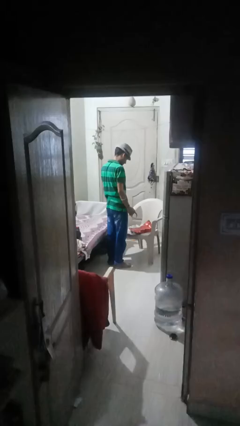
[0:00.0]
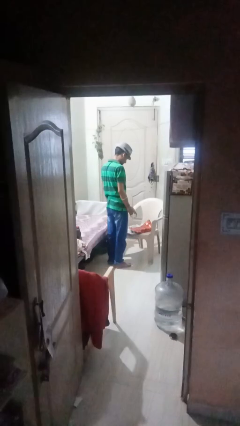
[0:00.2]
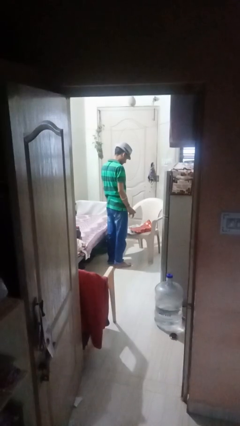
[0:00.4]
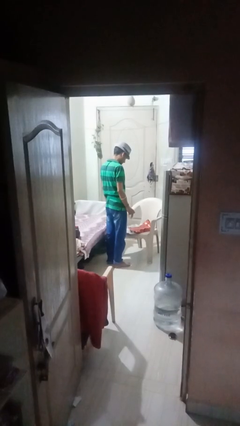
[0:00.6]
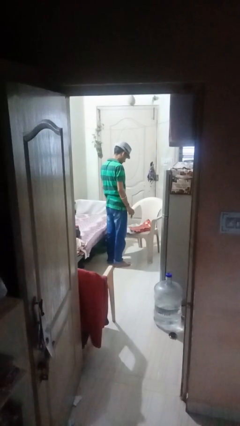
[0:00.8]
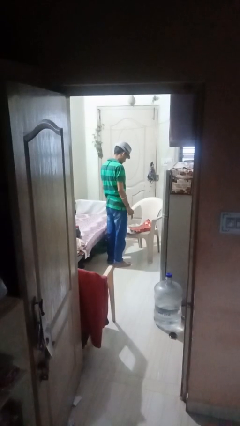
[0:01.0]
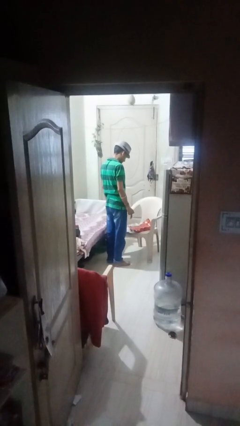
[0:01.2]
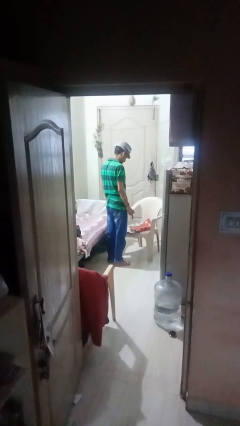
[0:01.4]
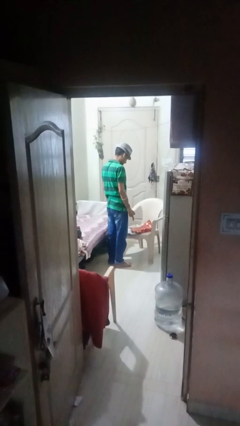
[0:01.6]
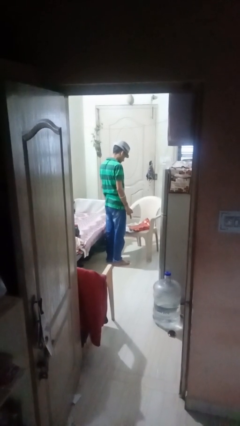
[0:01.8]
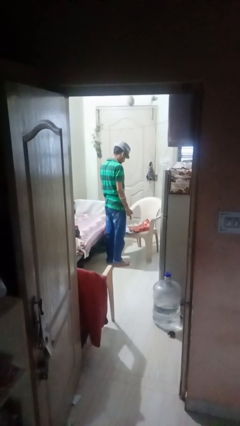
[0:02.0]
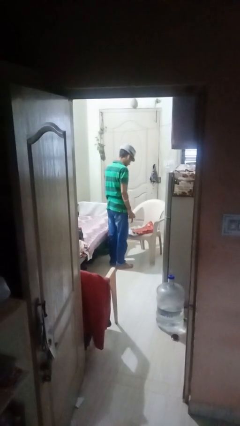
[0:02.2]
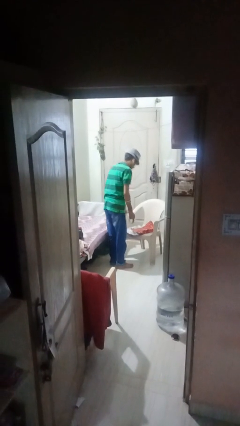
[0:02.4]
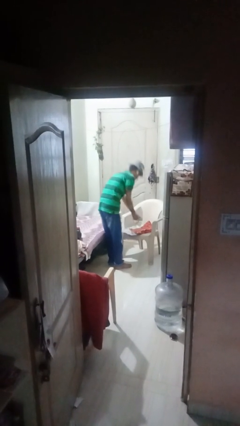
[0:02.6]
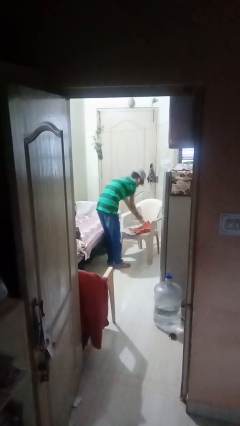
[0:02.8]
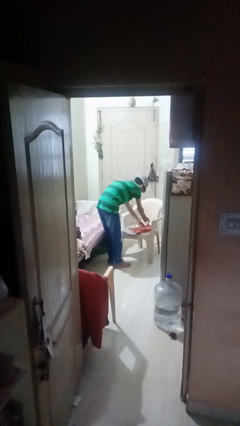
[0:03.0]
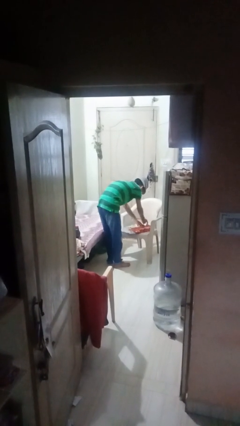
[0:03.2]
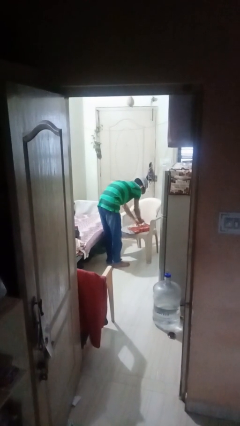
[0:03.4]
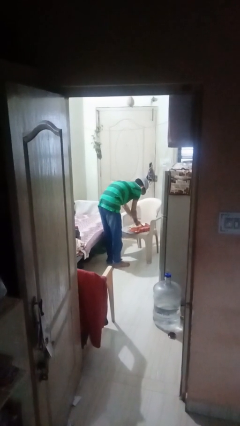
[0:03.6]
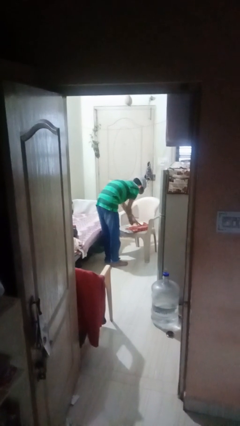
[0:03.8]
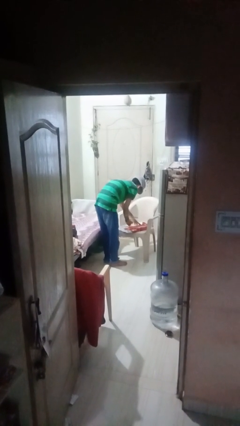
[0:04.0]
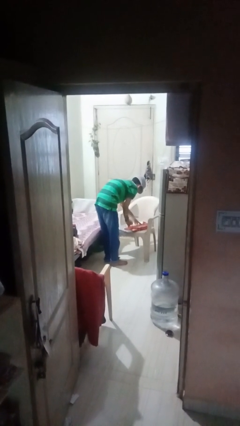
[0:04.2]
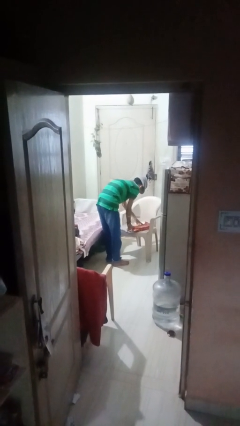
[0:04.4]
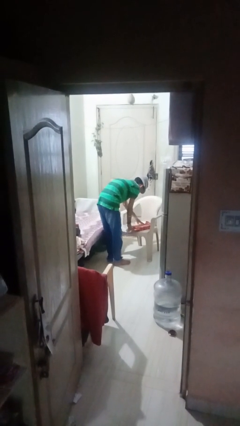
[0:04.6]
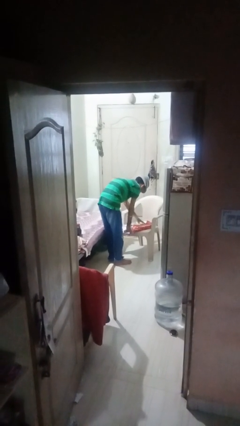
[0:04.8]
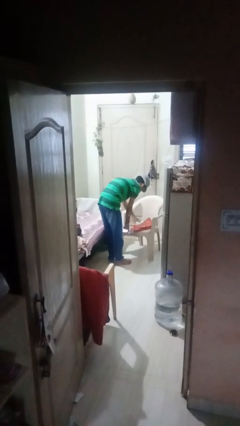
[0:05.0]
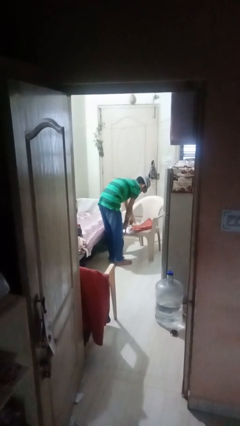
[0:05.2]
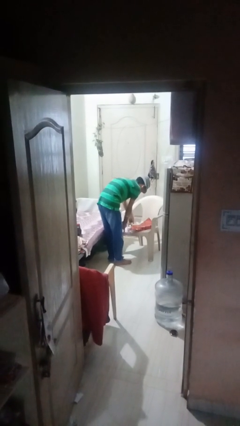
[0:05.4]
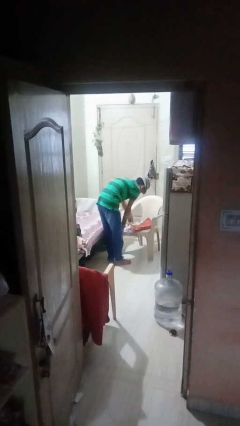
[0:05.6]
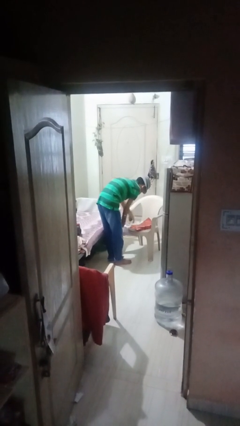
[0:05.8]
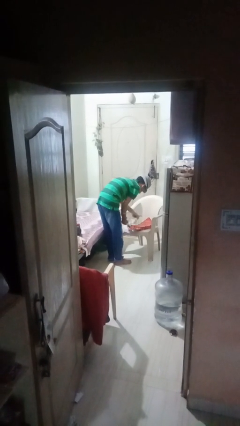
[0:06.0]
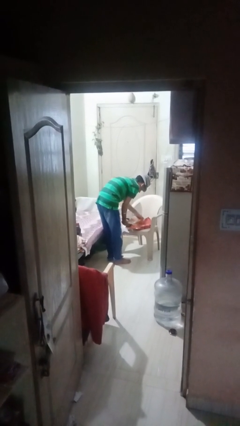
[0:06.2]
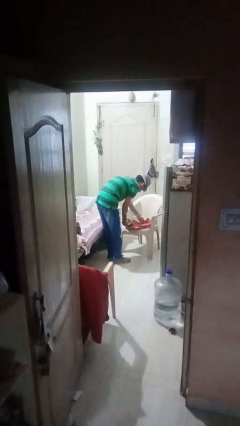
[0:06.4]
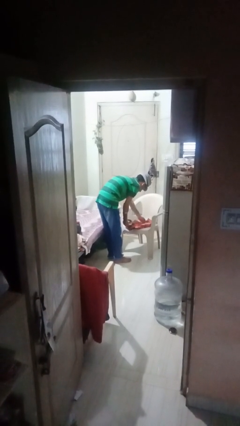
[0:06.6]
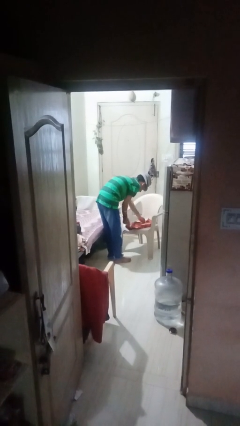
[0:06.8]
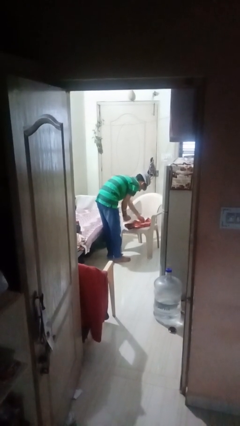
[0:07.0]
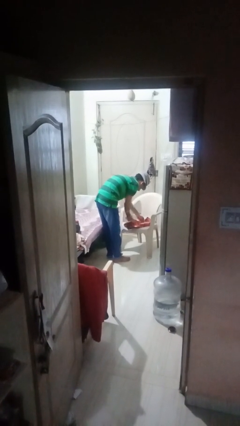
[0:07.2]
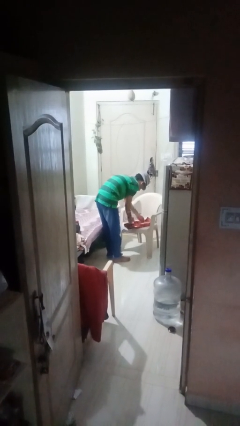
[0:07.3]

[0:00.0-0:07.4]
person wraps box

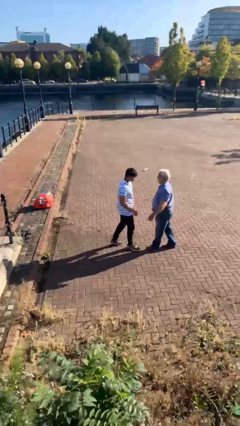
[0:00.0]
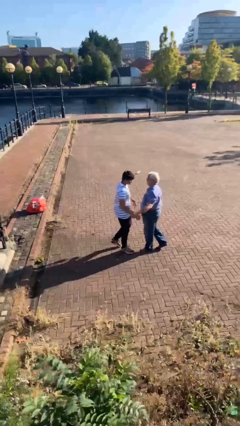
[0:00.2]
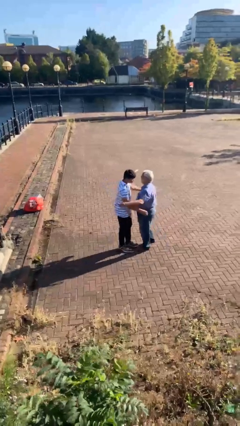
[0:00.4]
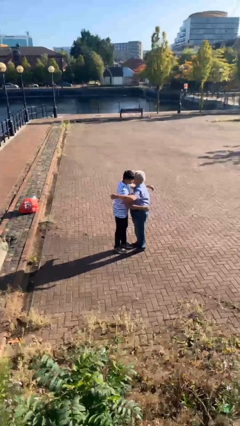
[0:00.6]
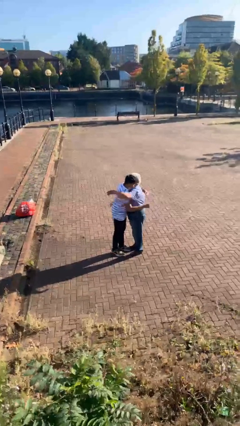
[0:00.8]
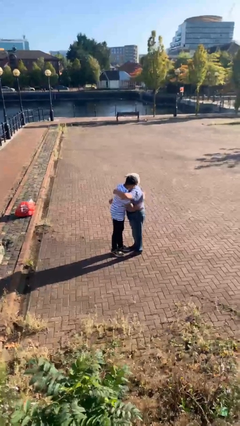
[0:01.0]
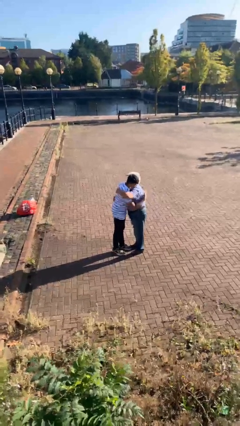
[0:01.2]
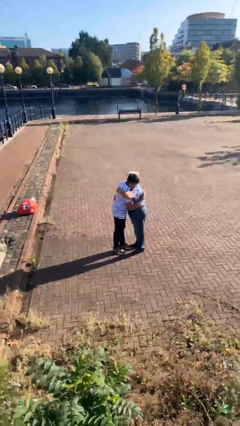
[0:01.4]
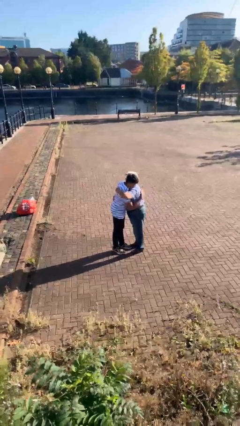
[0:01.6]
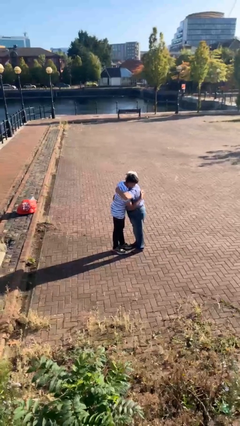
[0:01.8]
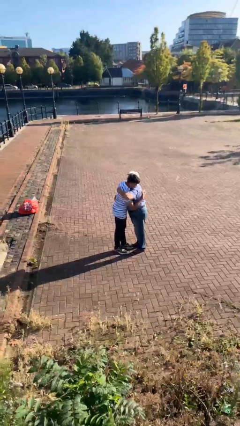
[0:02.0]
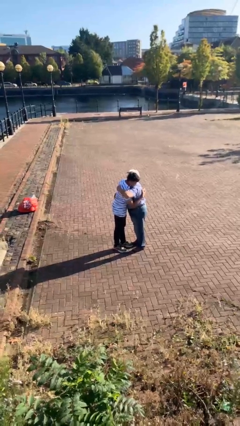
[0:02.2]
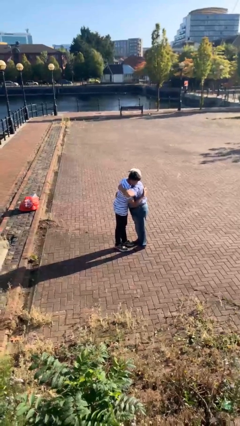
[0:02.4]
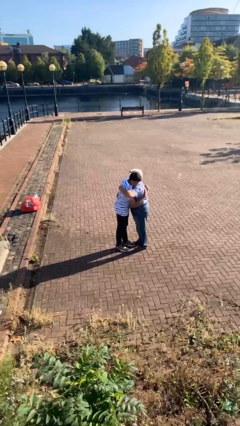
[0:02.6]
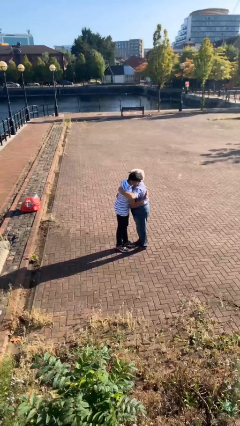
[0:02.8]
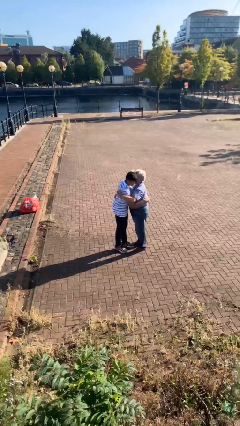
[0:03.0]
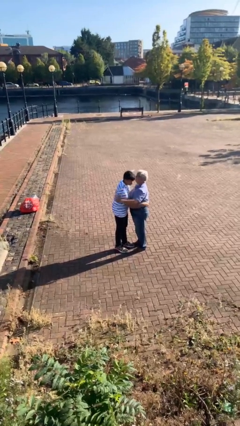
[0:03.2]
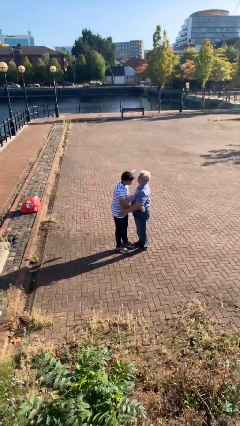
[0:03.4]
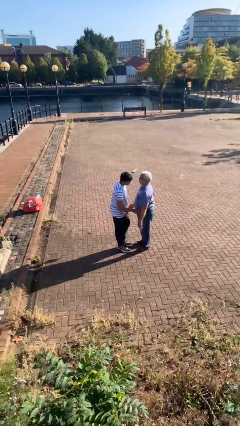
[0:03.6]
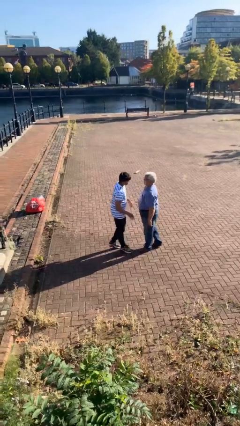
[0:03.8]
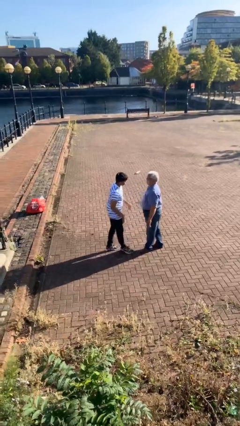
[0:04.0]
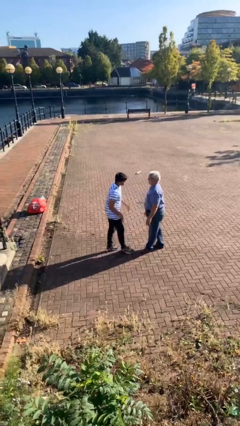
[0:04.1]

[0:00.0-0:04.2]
person embraces person

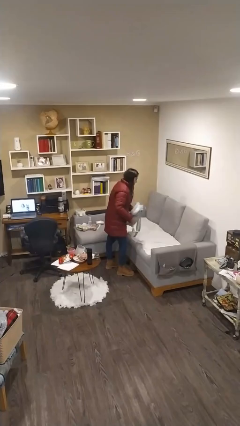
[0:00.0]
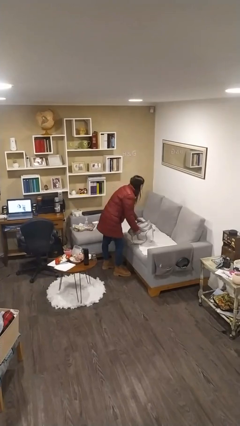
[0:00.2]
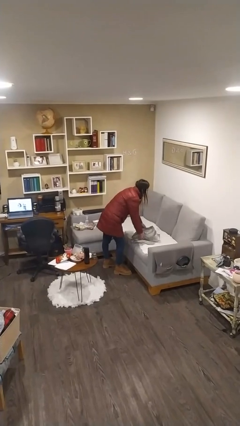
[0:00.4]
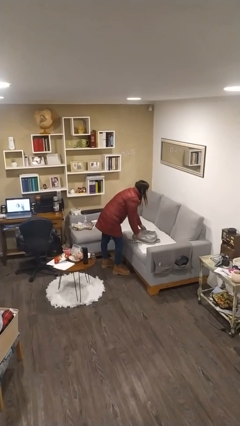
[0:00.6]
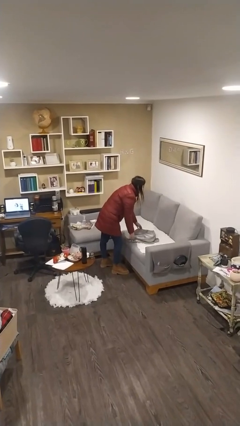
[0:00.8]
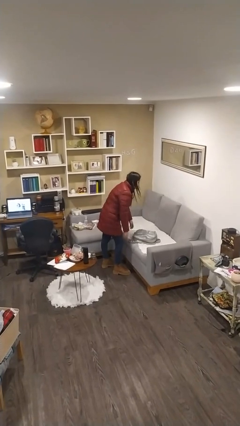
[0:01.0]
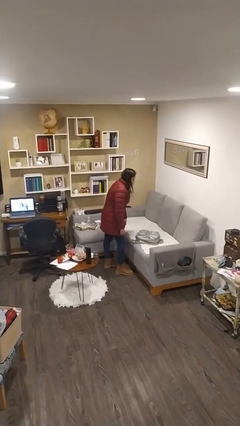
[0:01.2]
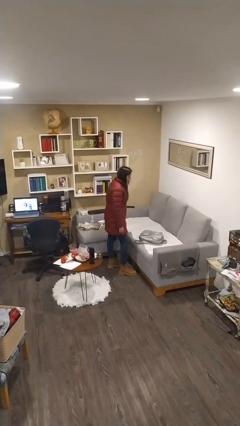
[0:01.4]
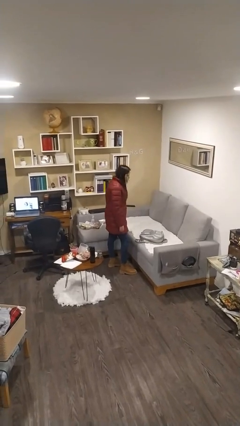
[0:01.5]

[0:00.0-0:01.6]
person puts down object on couch

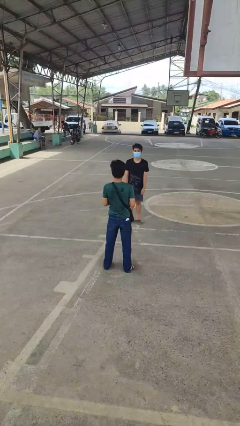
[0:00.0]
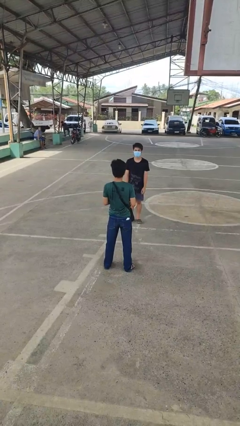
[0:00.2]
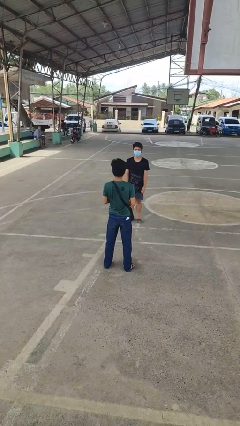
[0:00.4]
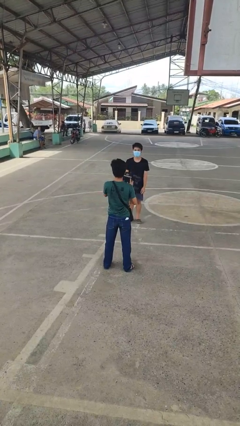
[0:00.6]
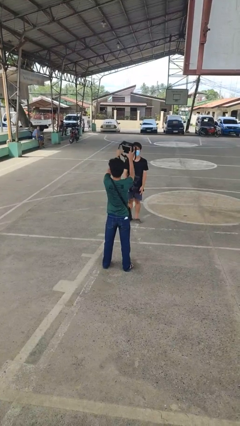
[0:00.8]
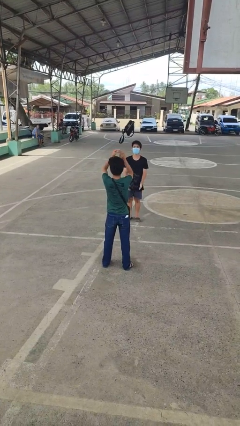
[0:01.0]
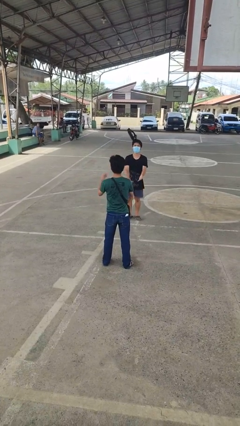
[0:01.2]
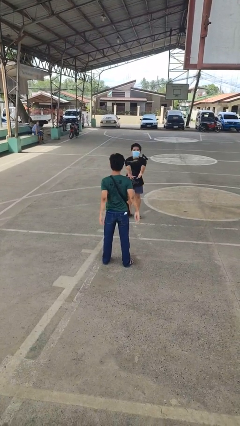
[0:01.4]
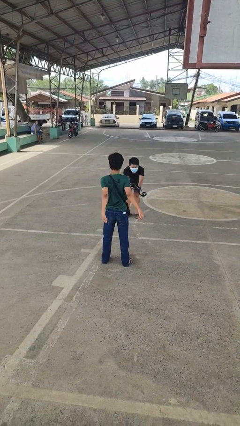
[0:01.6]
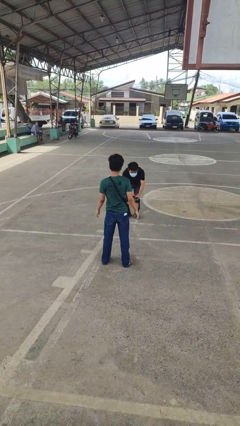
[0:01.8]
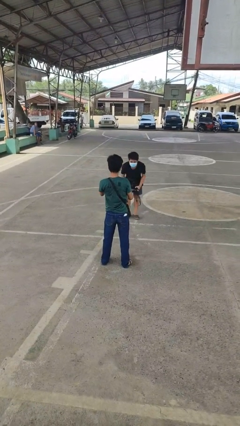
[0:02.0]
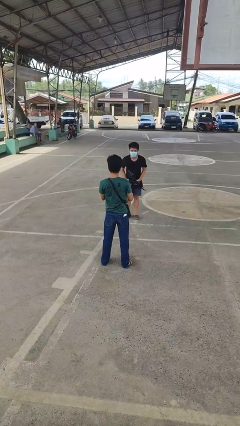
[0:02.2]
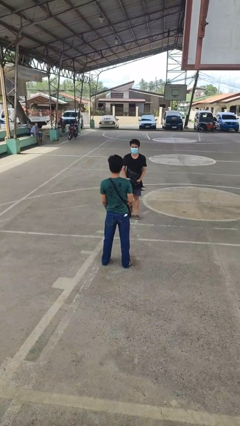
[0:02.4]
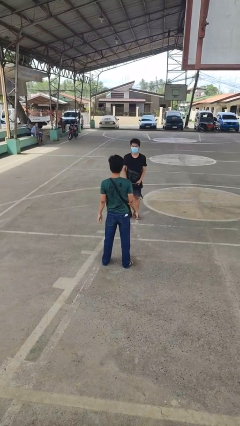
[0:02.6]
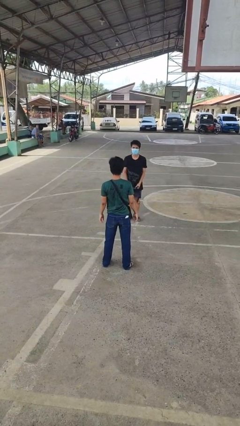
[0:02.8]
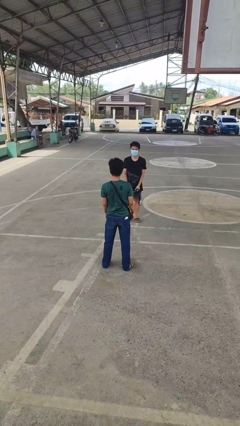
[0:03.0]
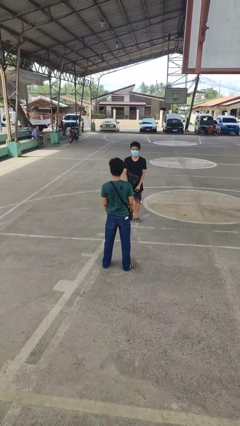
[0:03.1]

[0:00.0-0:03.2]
person throws object to person

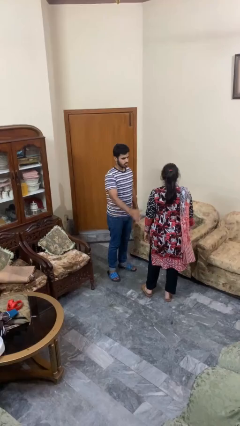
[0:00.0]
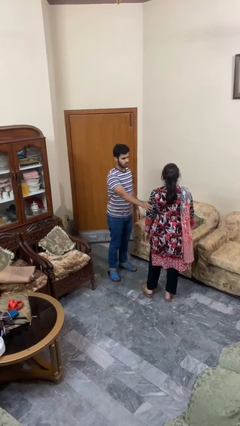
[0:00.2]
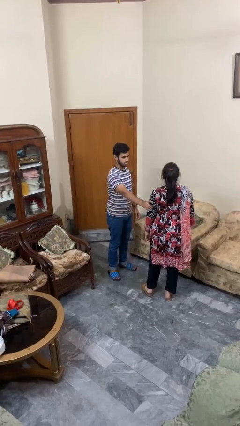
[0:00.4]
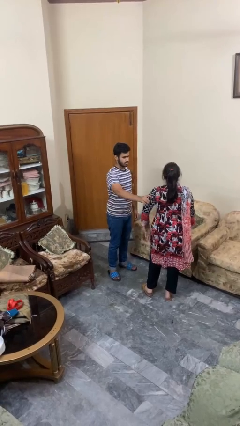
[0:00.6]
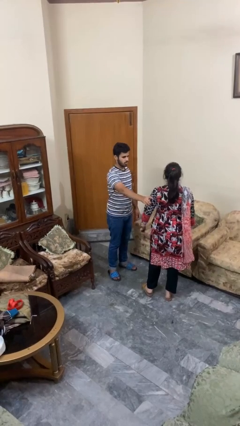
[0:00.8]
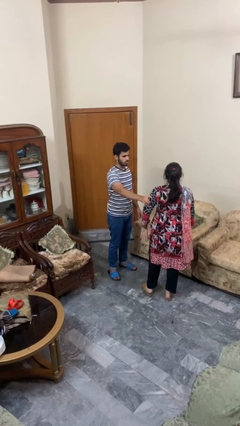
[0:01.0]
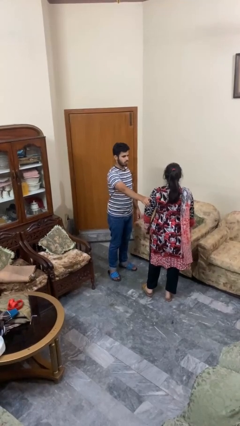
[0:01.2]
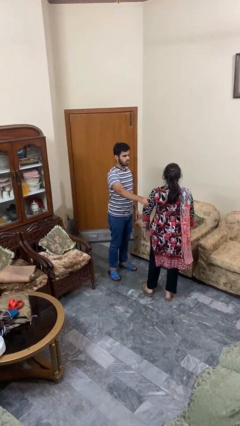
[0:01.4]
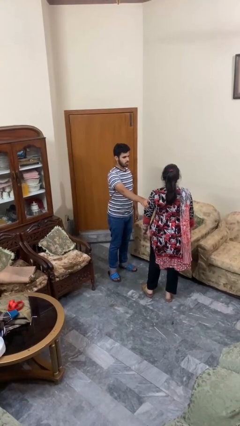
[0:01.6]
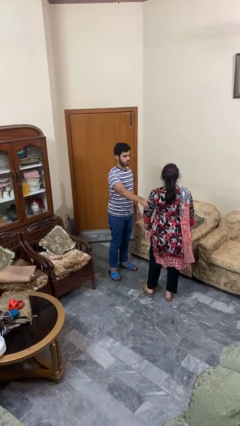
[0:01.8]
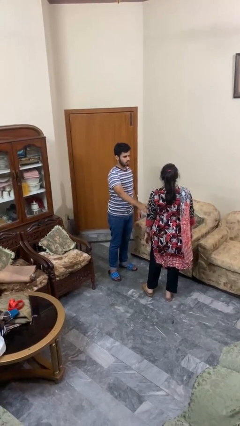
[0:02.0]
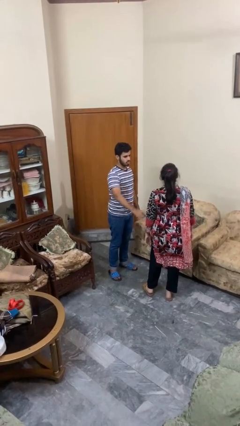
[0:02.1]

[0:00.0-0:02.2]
person grabs person by bicep
